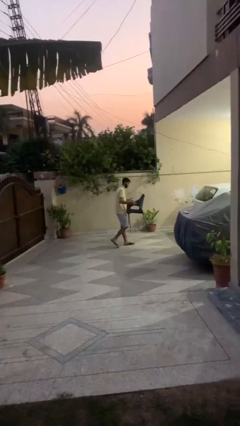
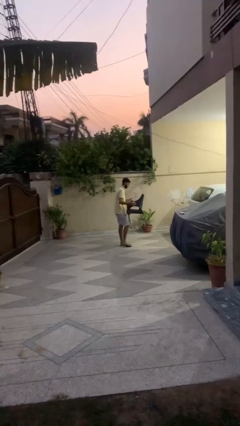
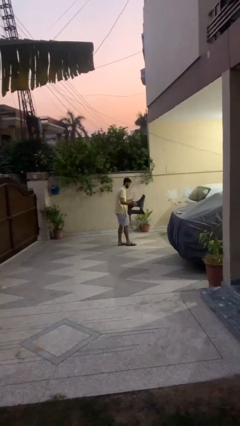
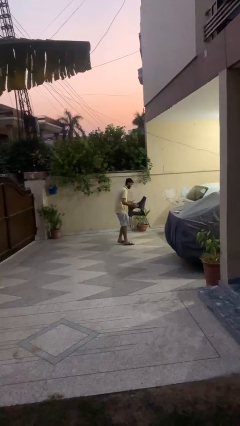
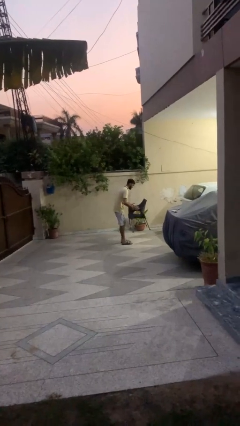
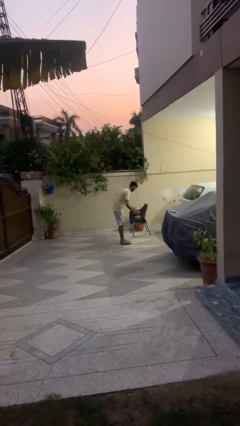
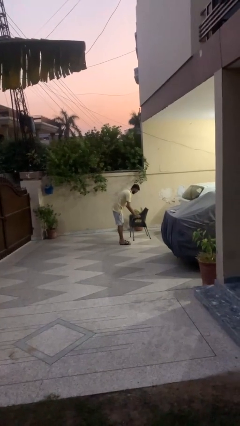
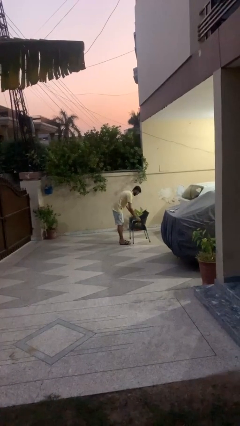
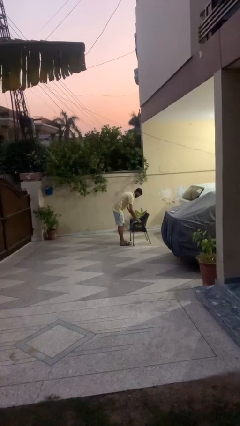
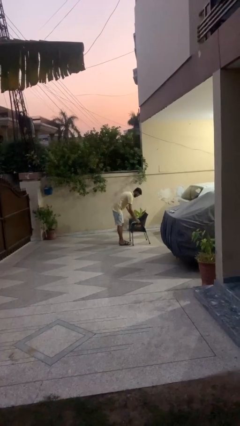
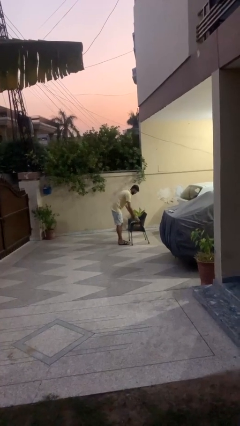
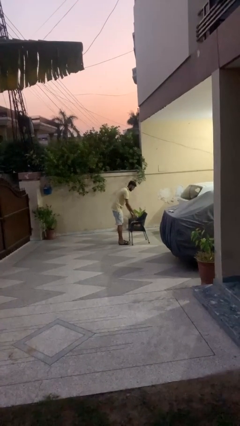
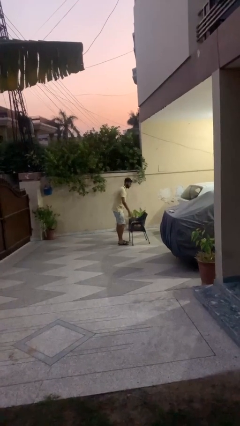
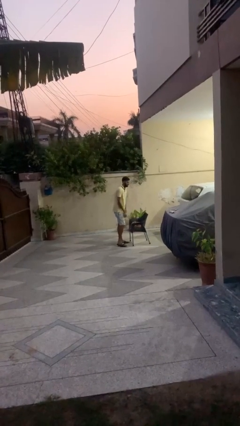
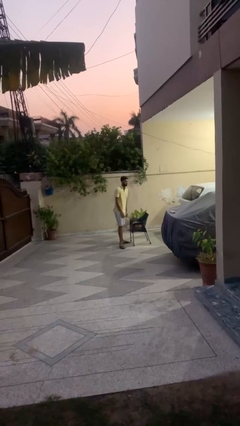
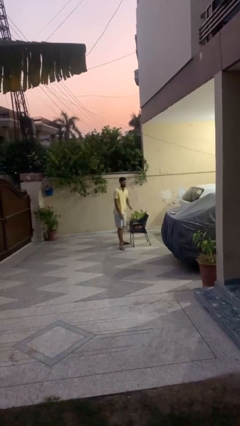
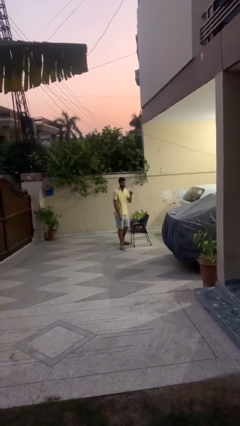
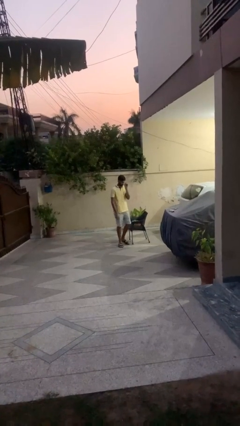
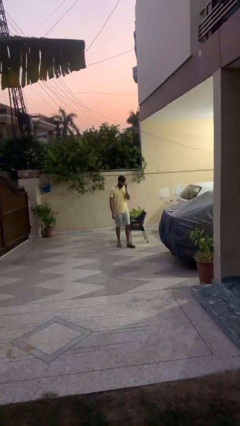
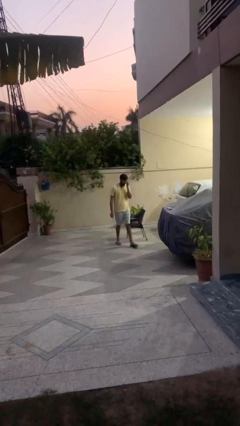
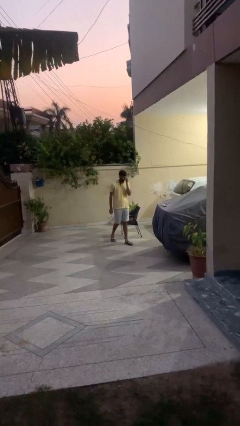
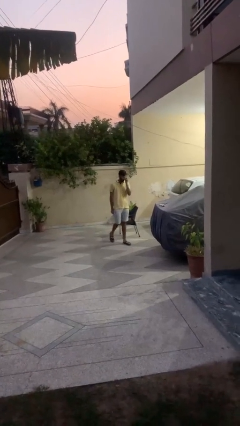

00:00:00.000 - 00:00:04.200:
person puts down object on floor

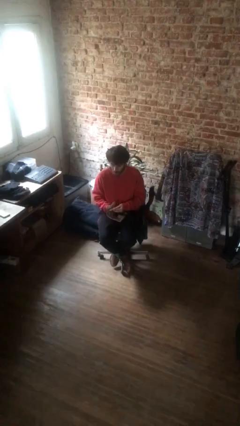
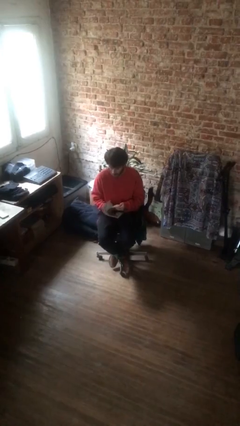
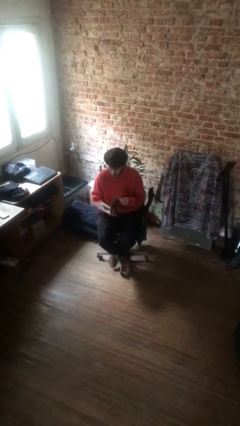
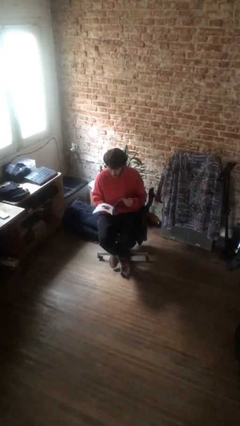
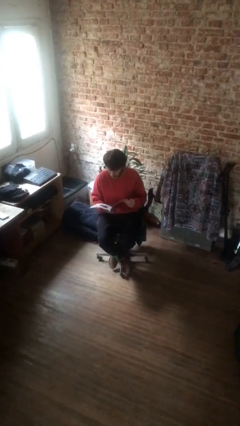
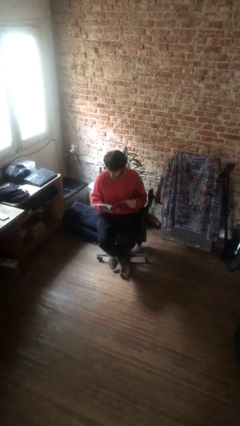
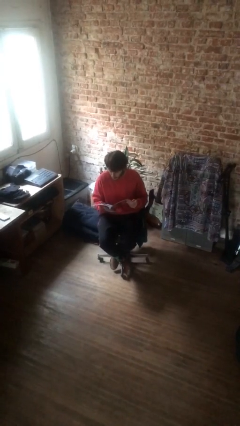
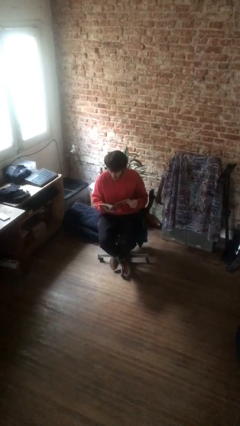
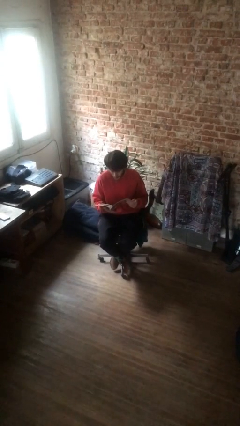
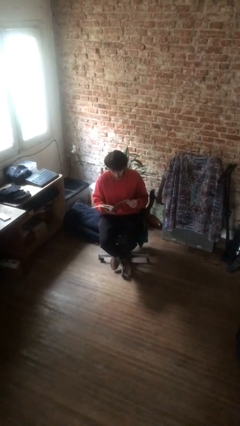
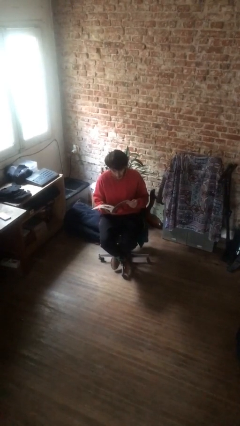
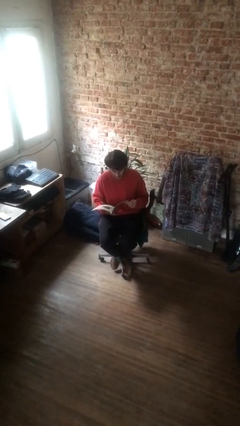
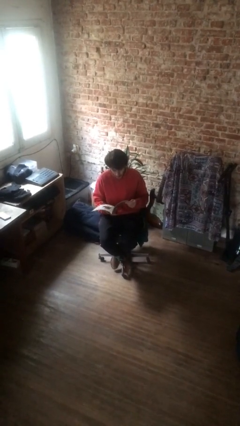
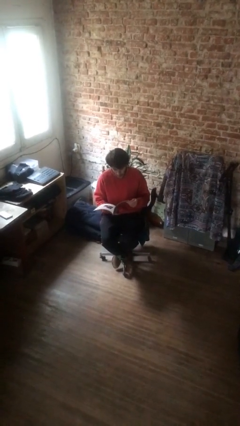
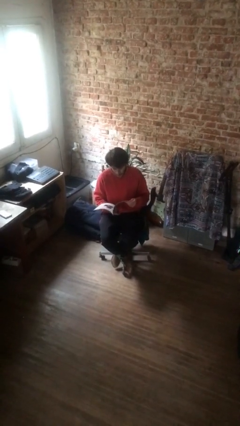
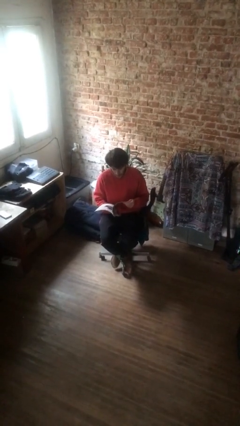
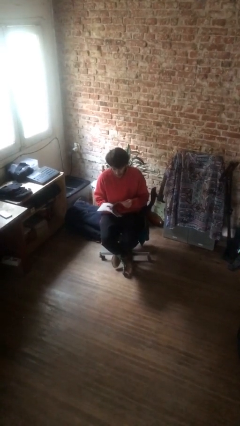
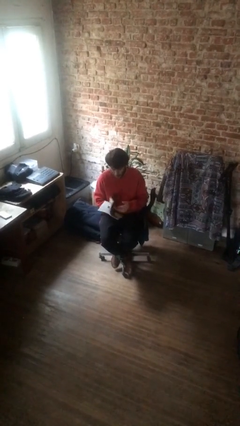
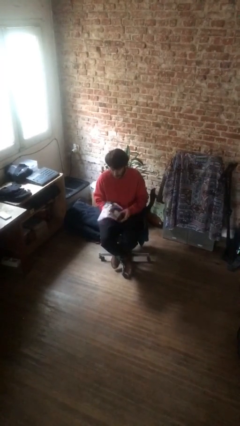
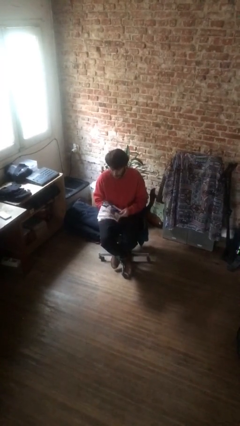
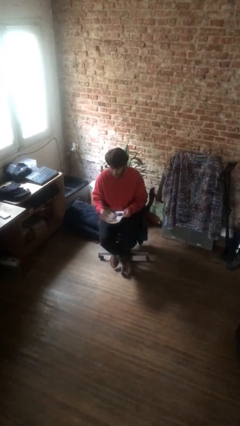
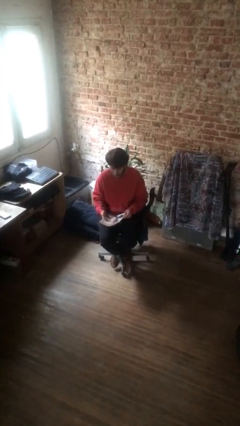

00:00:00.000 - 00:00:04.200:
person reads magazine

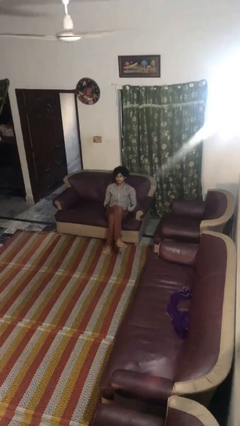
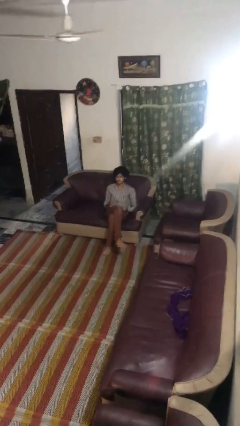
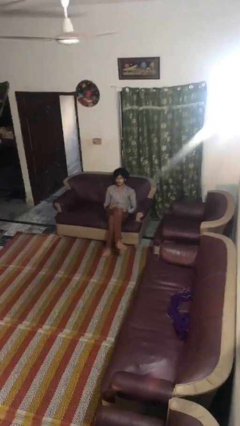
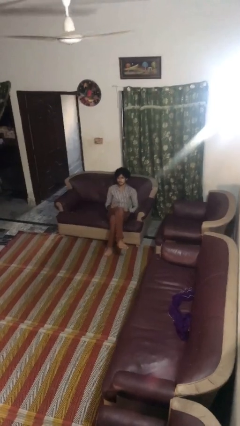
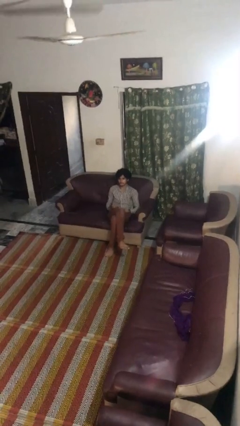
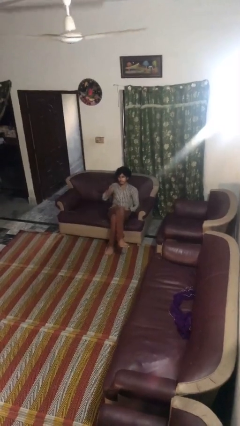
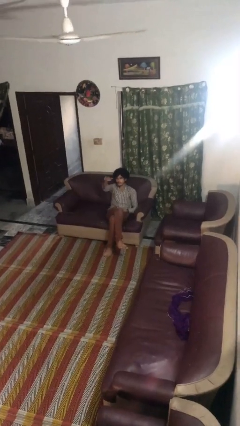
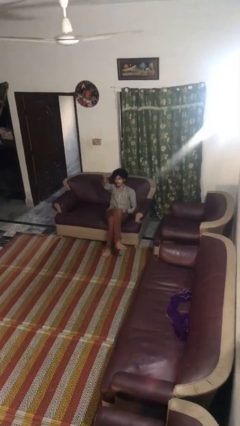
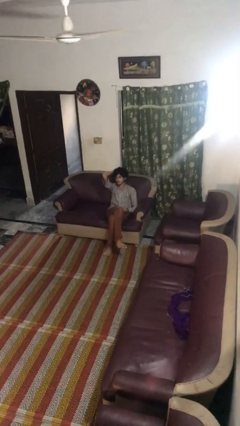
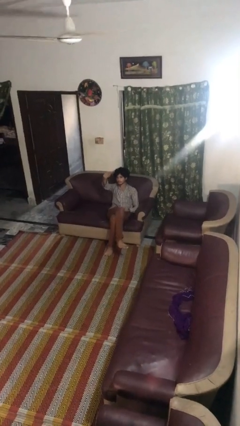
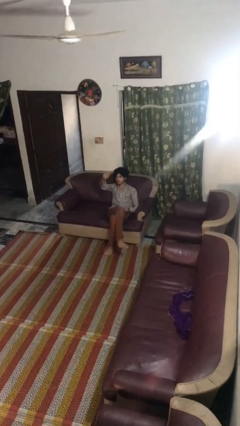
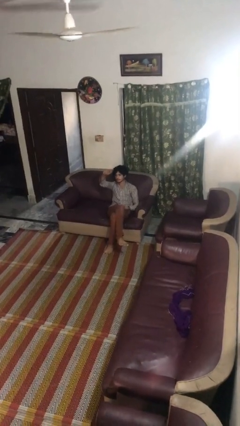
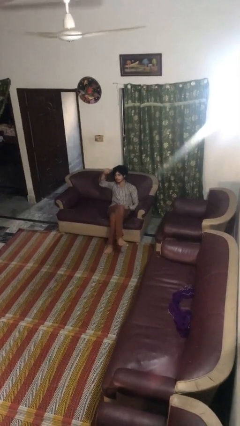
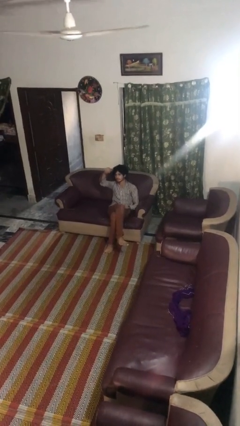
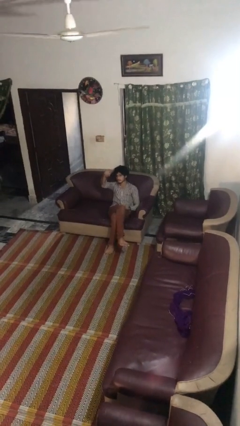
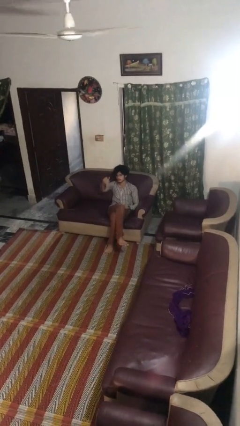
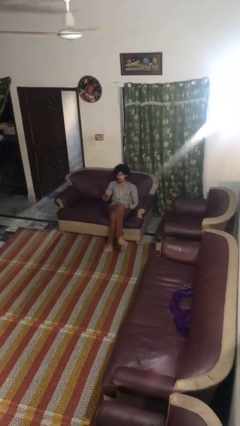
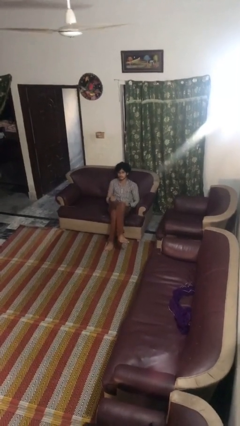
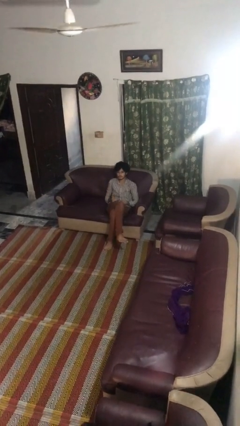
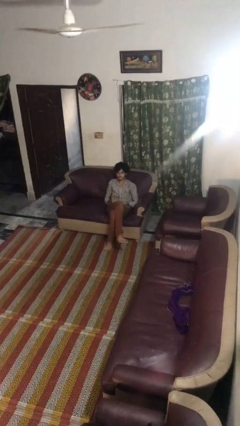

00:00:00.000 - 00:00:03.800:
person gestures come here

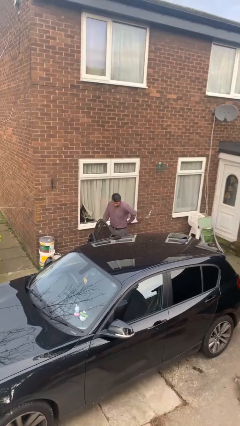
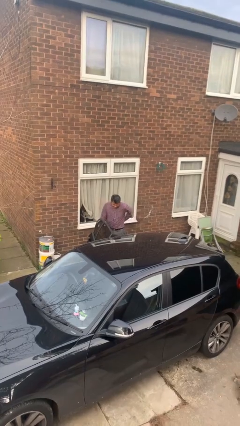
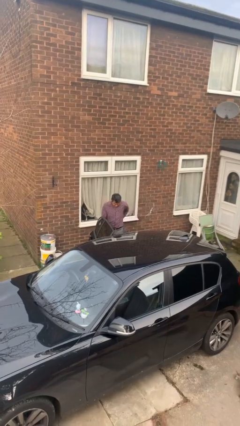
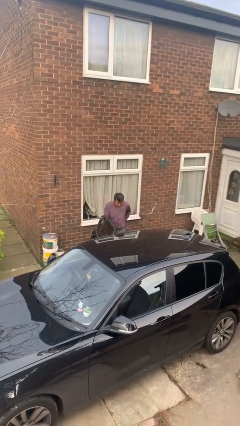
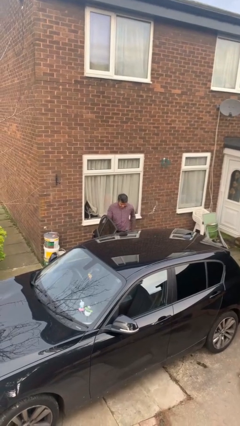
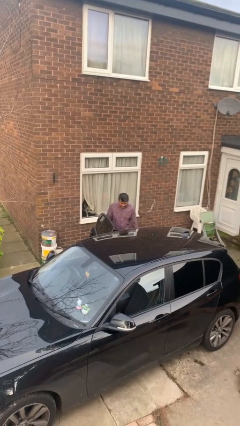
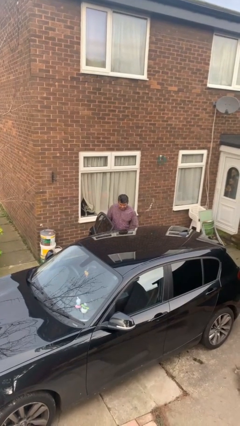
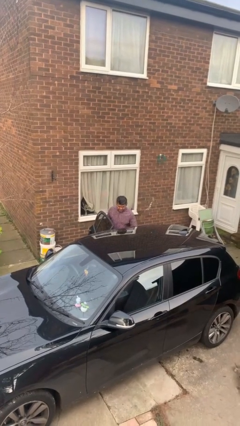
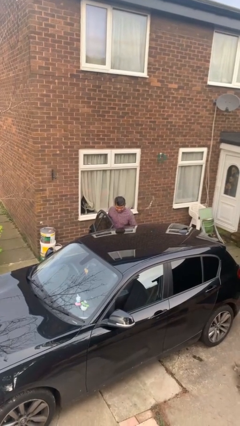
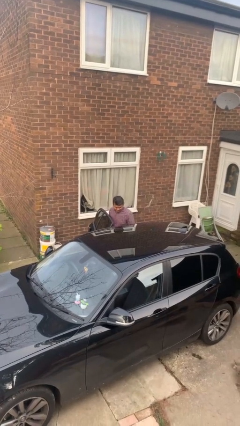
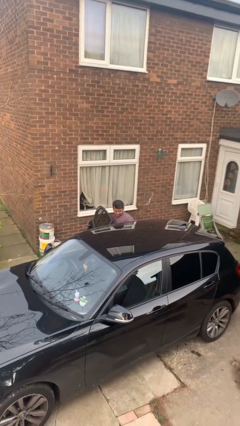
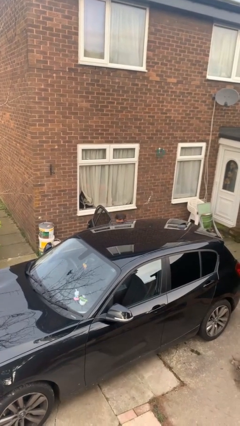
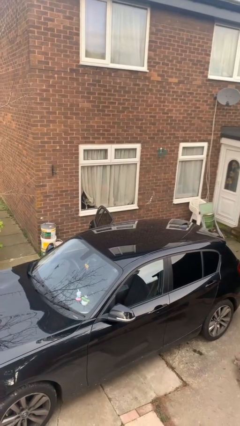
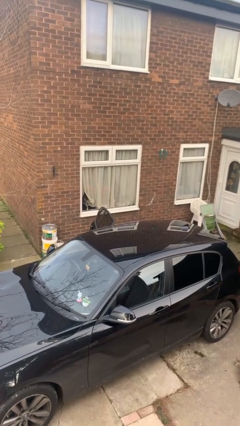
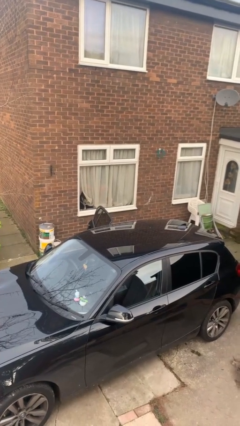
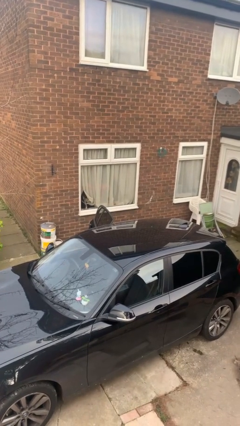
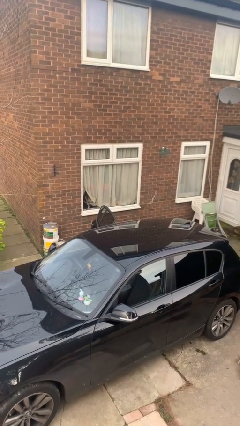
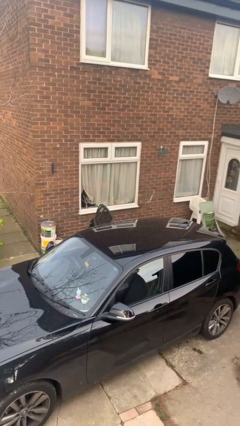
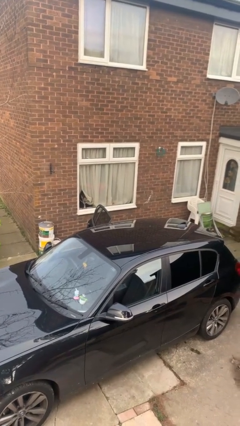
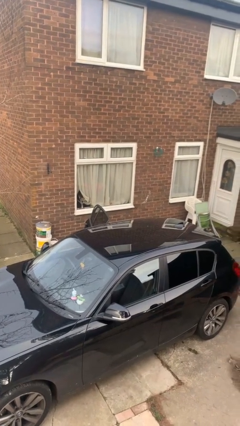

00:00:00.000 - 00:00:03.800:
person enters car

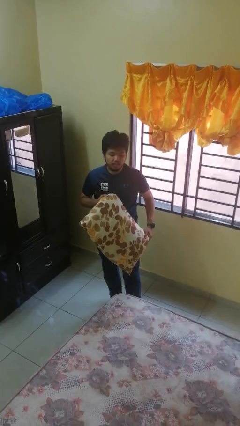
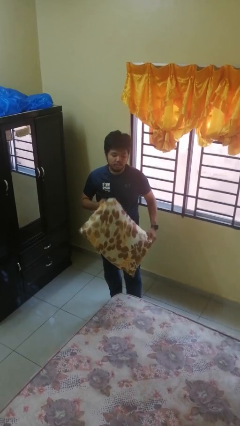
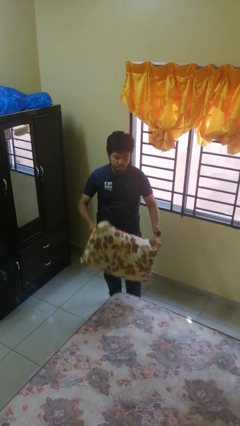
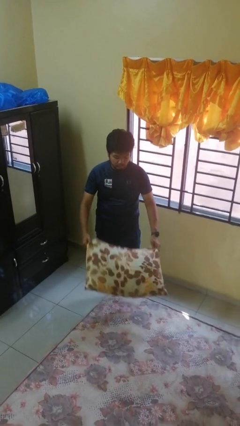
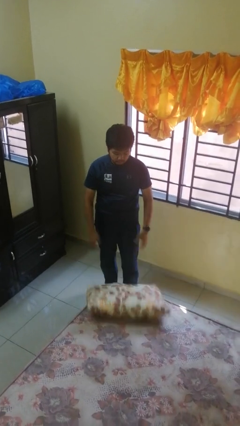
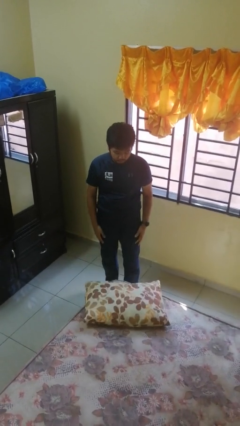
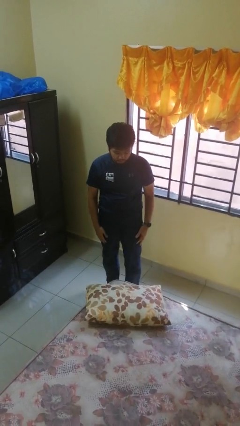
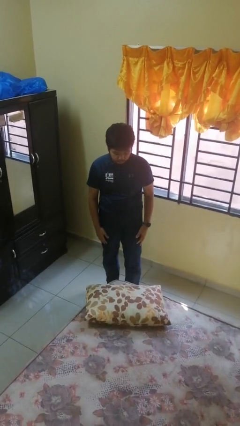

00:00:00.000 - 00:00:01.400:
person puts down object on bed

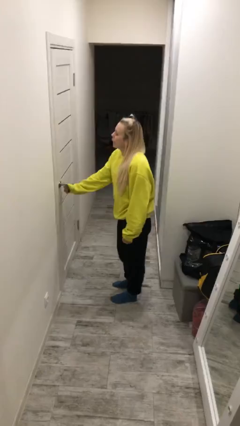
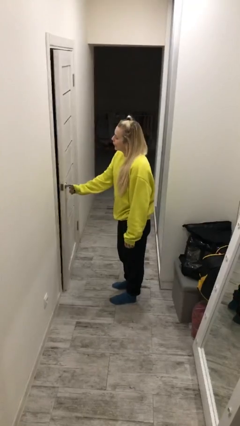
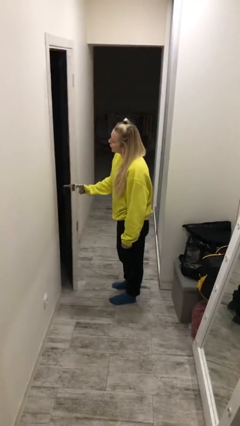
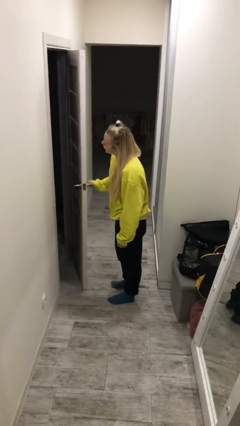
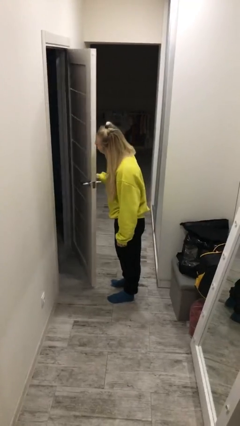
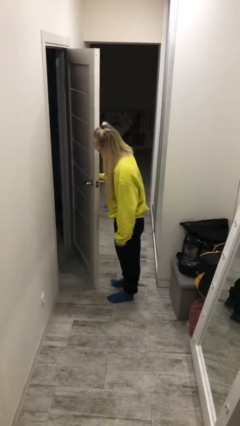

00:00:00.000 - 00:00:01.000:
person opens facility door
